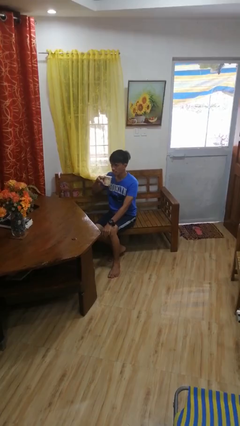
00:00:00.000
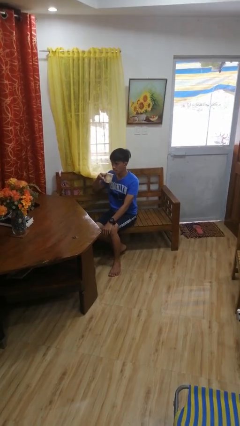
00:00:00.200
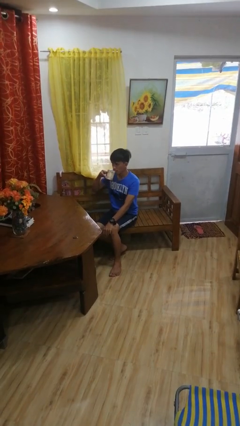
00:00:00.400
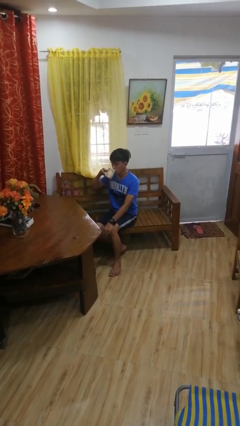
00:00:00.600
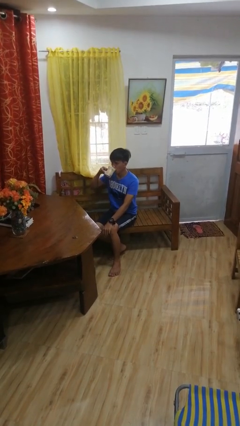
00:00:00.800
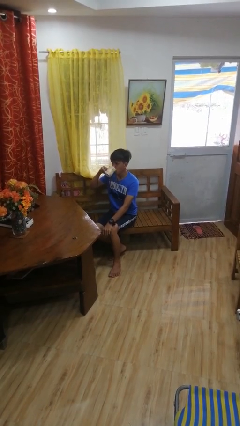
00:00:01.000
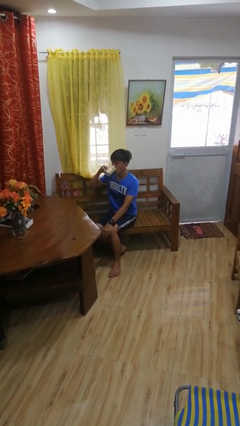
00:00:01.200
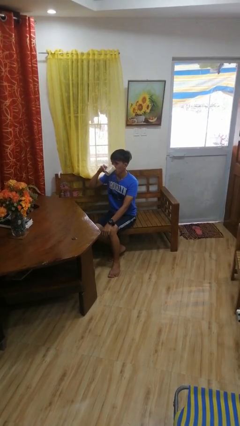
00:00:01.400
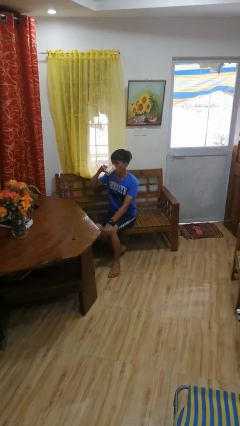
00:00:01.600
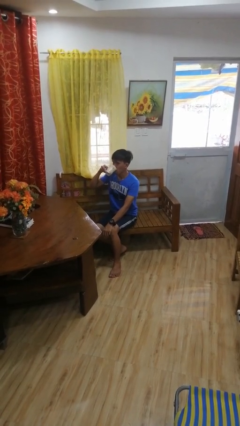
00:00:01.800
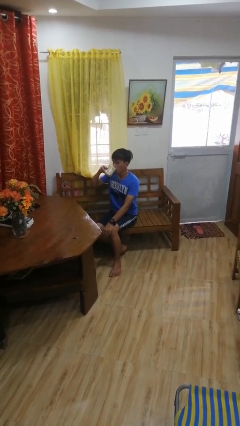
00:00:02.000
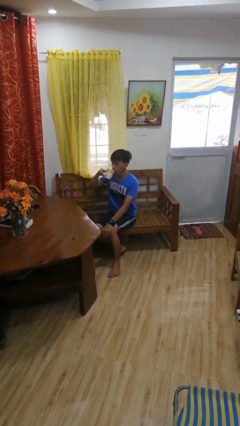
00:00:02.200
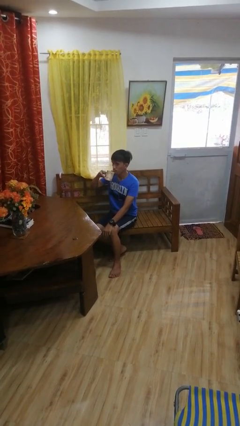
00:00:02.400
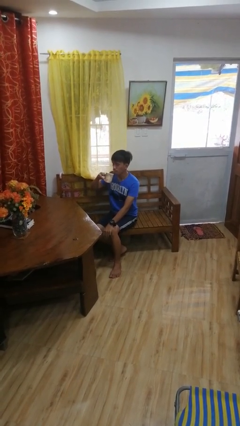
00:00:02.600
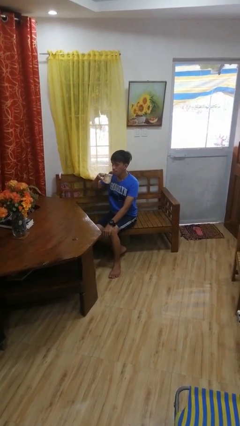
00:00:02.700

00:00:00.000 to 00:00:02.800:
person drinks from mug

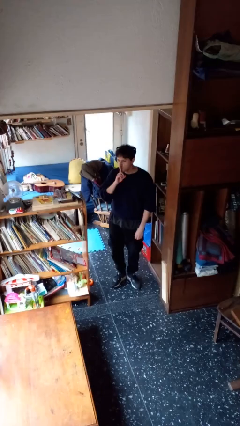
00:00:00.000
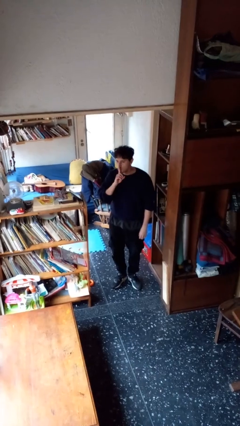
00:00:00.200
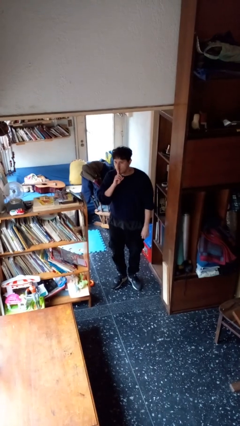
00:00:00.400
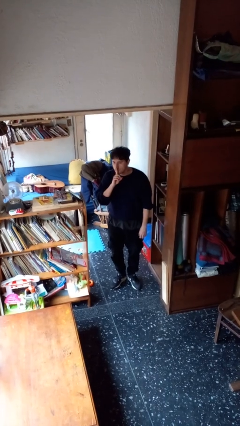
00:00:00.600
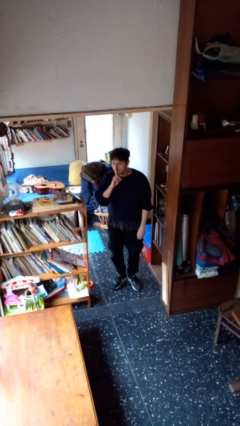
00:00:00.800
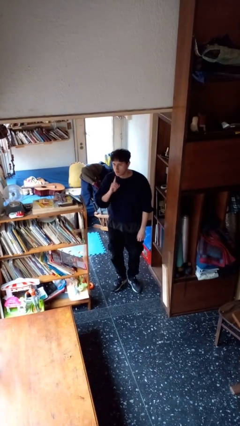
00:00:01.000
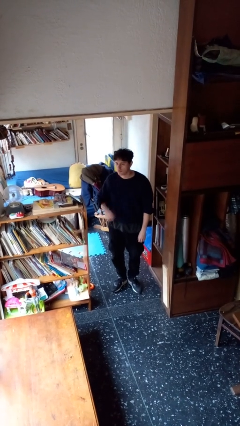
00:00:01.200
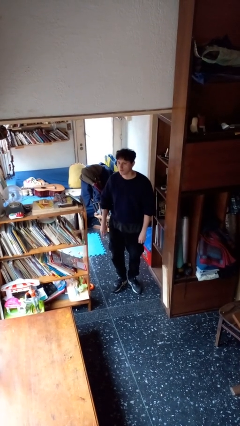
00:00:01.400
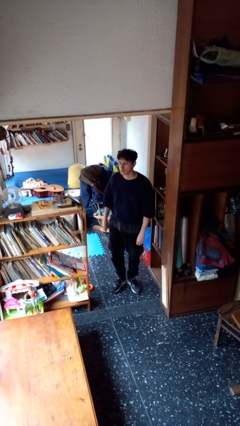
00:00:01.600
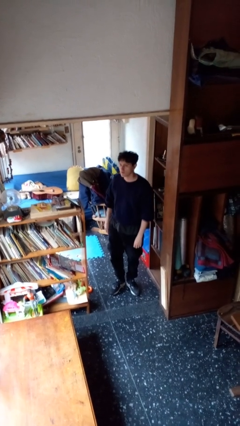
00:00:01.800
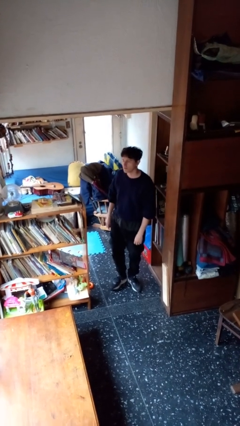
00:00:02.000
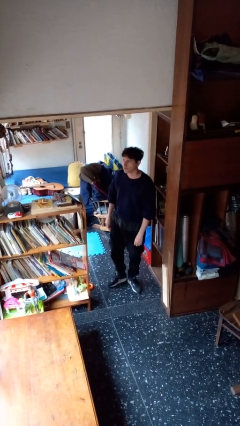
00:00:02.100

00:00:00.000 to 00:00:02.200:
person gestures be quiet

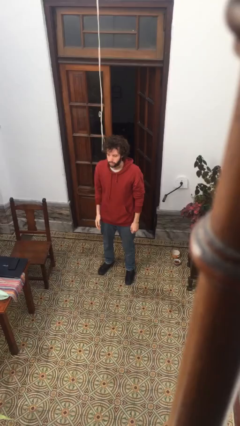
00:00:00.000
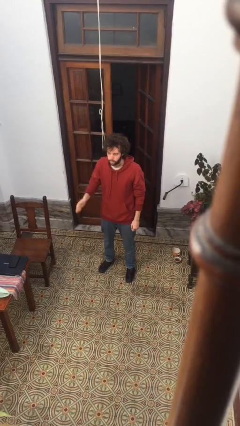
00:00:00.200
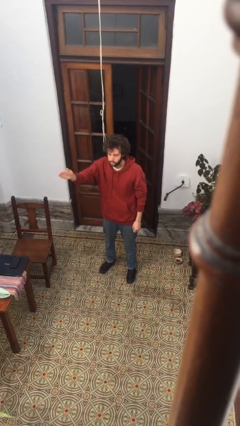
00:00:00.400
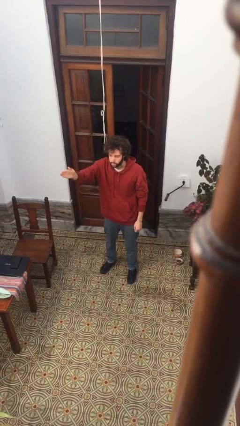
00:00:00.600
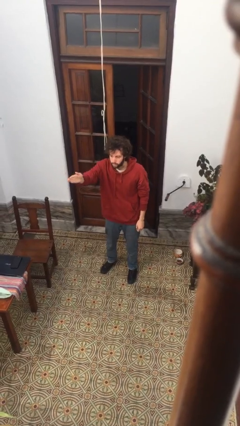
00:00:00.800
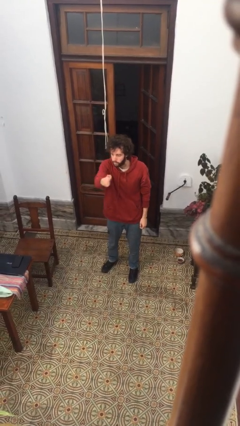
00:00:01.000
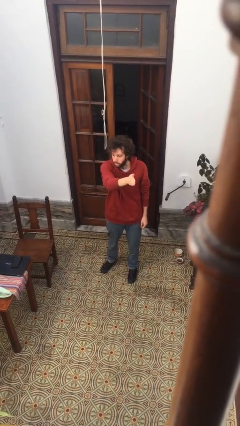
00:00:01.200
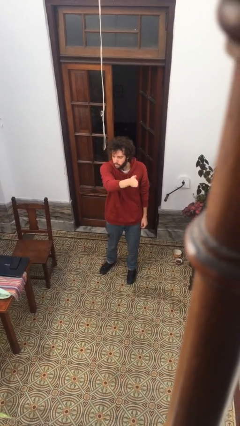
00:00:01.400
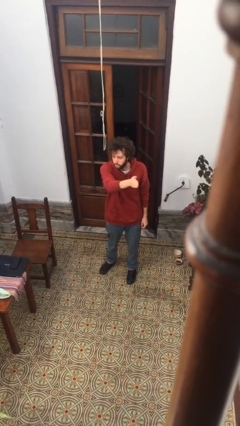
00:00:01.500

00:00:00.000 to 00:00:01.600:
person gestures swipe left

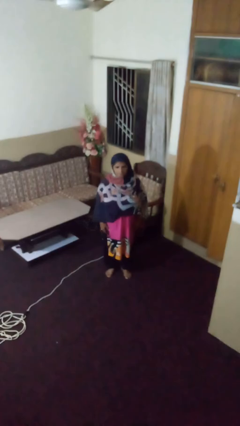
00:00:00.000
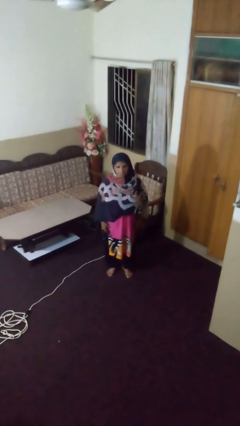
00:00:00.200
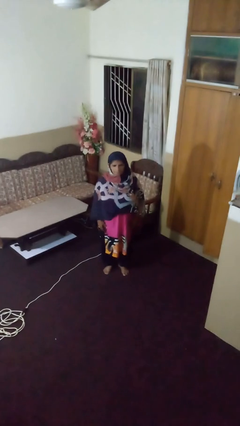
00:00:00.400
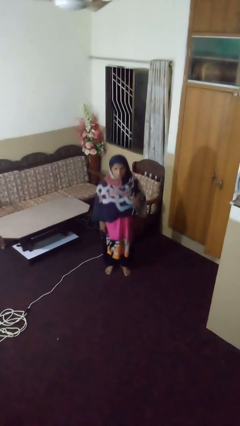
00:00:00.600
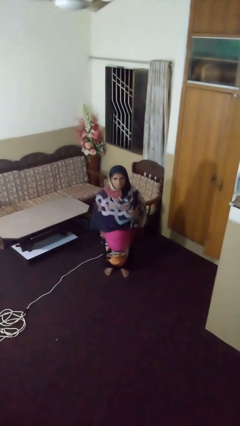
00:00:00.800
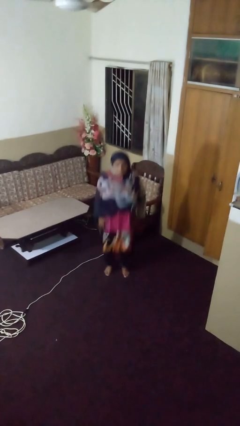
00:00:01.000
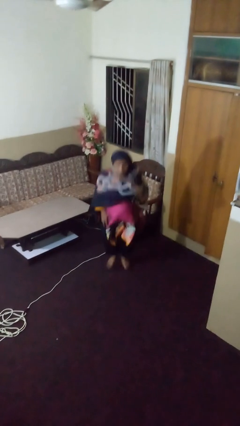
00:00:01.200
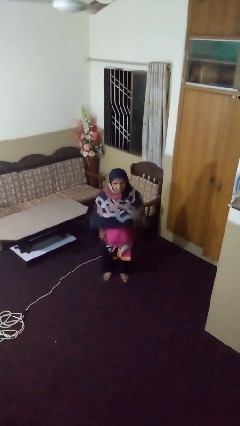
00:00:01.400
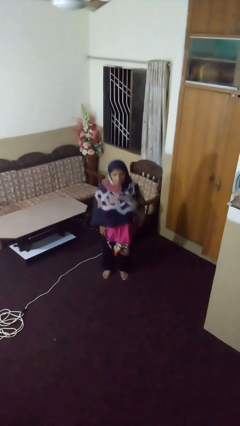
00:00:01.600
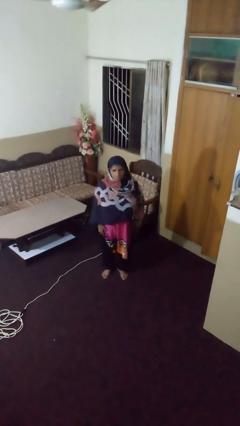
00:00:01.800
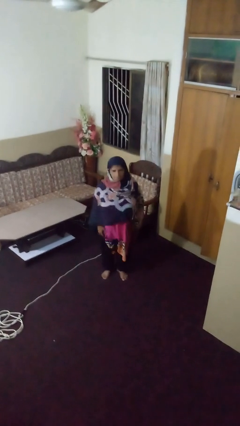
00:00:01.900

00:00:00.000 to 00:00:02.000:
person jumps

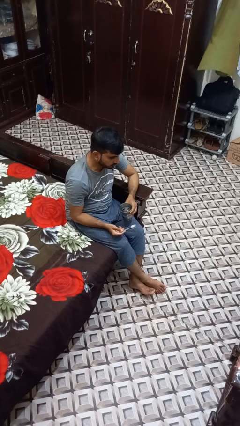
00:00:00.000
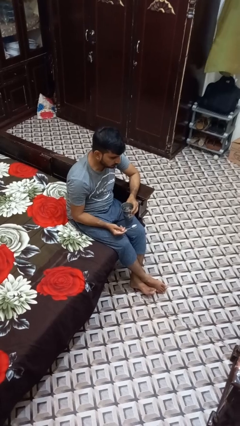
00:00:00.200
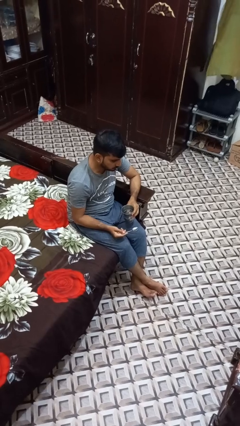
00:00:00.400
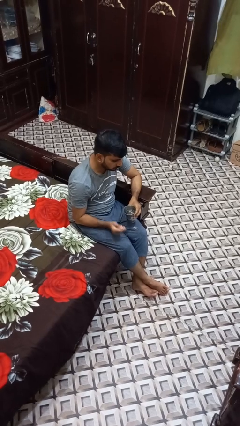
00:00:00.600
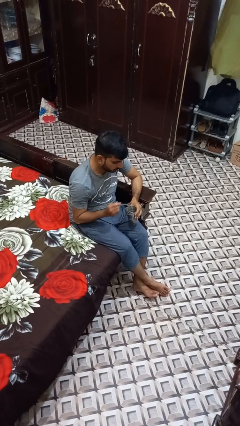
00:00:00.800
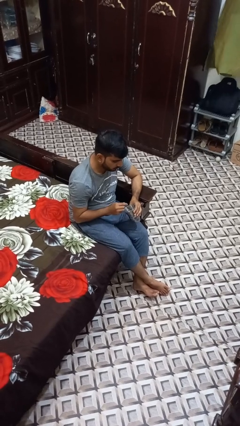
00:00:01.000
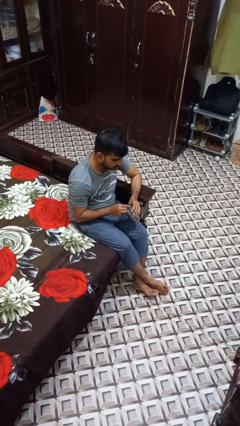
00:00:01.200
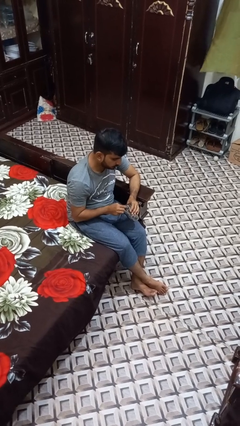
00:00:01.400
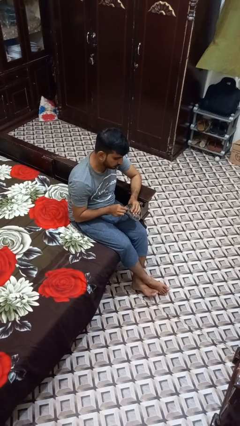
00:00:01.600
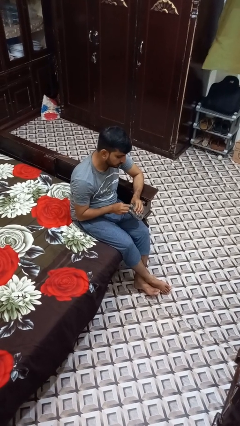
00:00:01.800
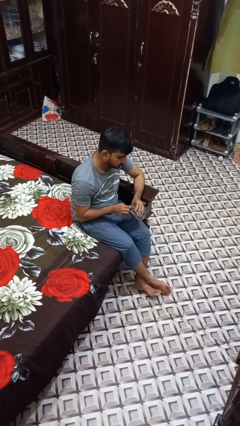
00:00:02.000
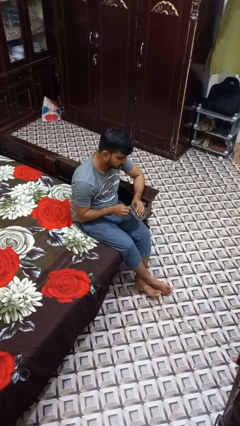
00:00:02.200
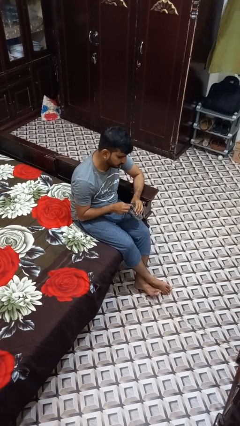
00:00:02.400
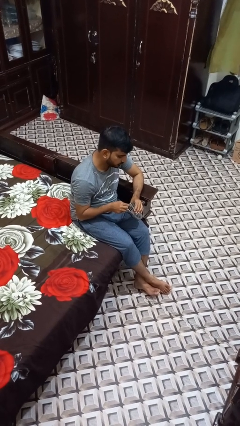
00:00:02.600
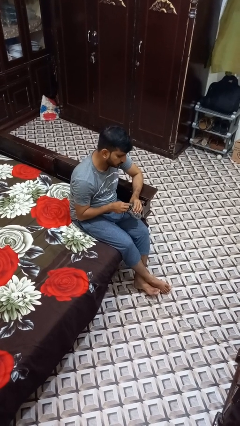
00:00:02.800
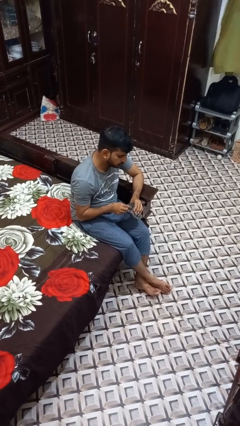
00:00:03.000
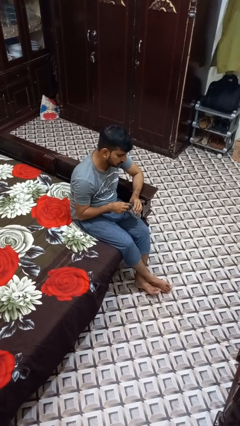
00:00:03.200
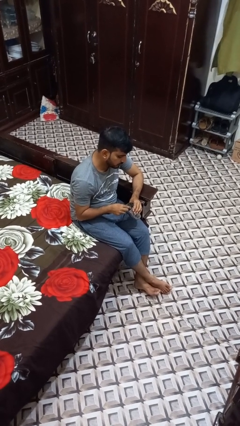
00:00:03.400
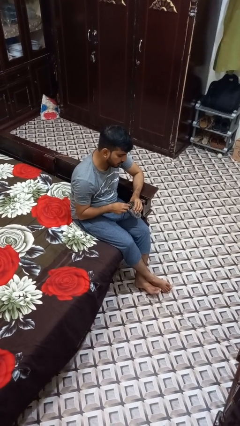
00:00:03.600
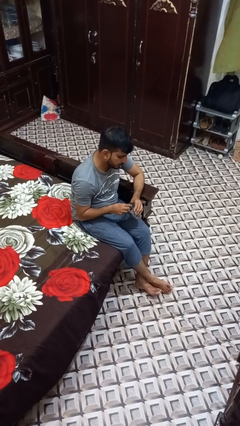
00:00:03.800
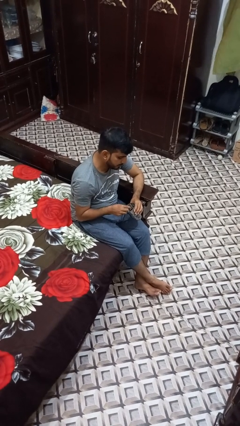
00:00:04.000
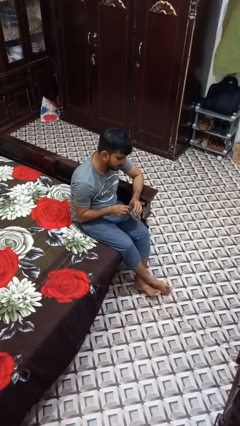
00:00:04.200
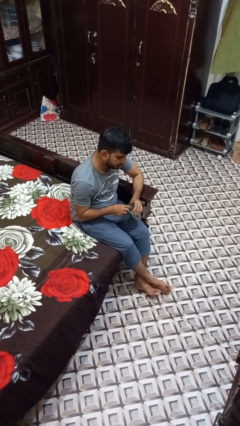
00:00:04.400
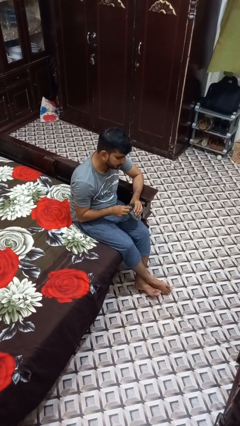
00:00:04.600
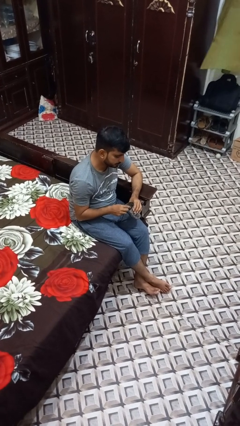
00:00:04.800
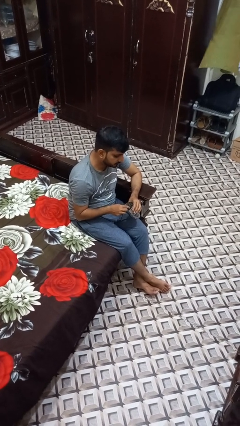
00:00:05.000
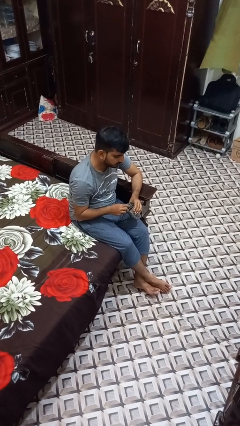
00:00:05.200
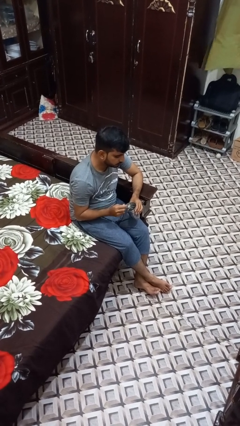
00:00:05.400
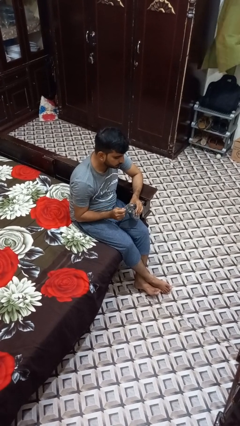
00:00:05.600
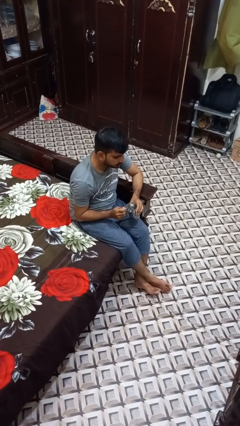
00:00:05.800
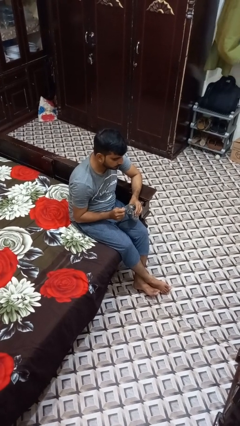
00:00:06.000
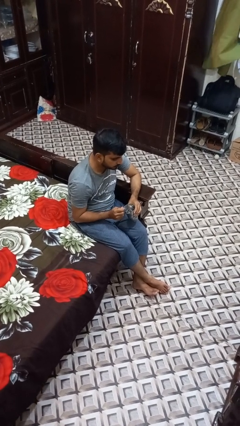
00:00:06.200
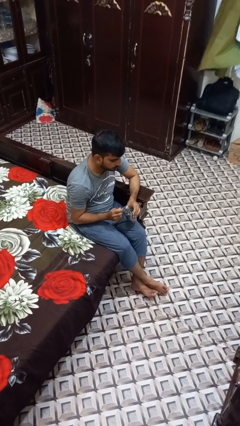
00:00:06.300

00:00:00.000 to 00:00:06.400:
person stirs mug

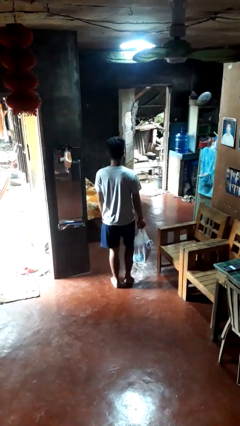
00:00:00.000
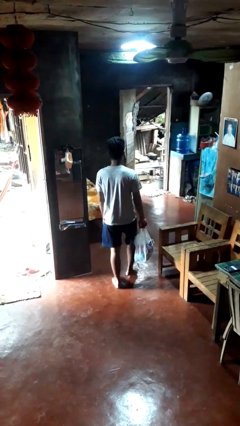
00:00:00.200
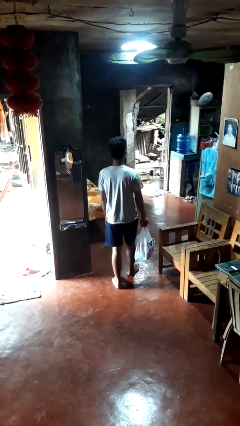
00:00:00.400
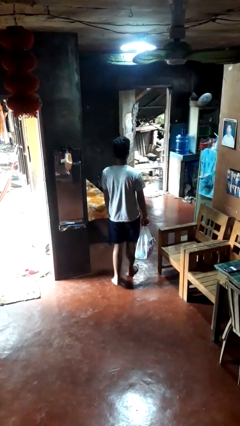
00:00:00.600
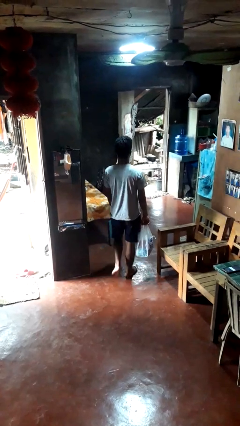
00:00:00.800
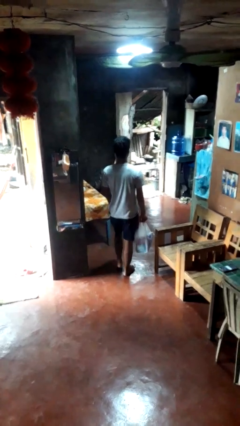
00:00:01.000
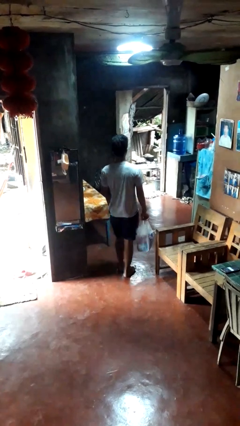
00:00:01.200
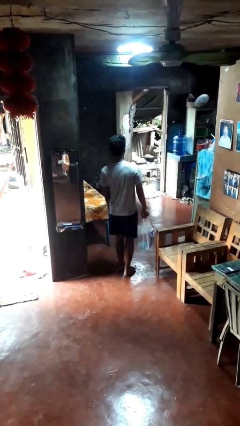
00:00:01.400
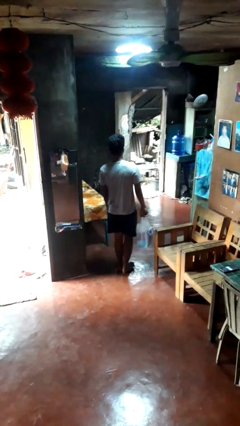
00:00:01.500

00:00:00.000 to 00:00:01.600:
person carries groceries

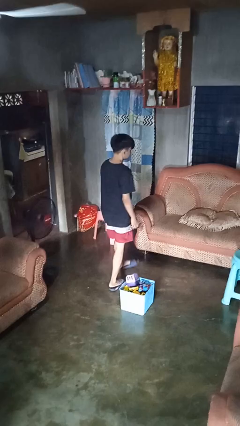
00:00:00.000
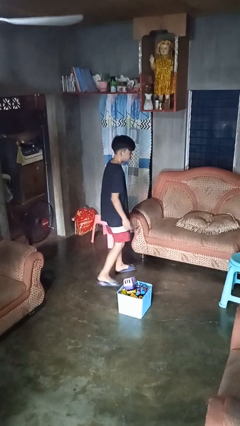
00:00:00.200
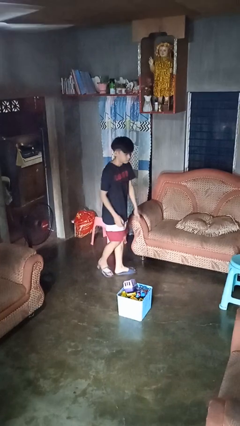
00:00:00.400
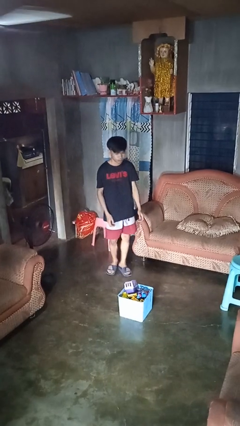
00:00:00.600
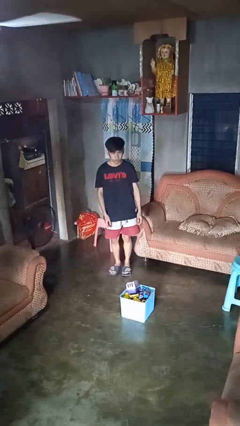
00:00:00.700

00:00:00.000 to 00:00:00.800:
person stands up from floor
